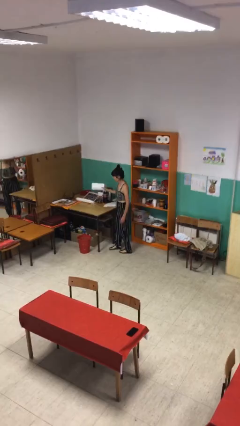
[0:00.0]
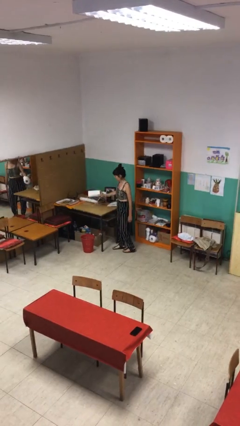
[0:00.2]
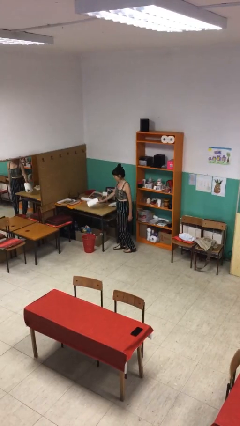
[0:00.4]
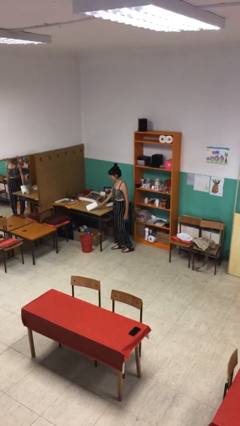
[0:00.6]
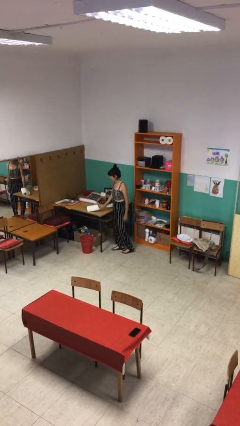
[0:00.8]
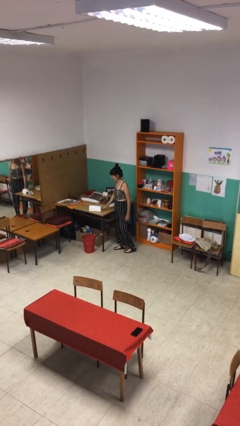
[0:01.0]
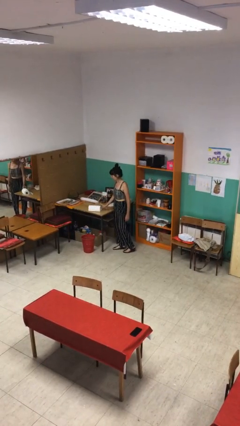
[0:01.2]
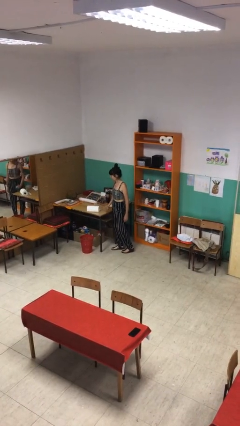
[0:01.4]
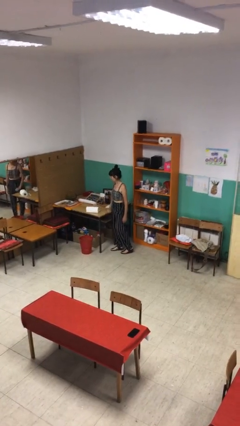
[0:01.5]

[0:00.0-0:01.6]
person puts down object on table

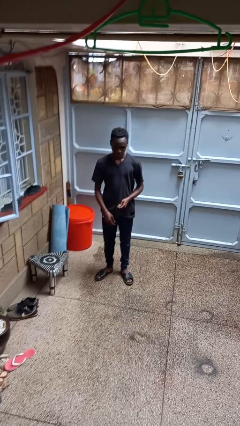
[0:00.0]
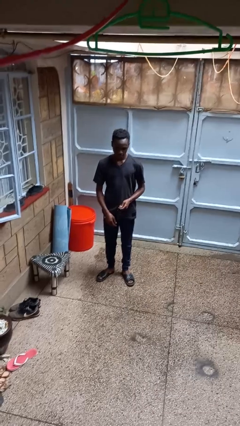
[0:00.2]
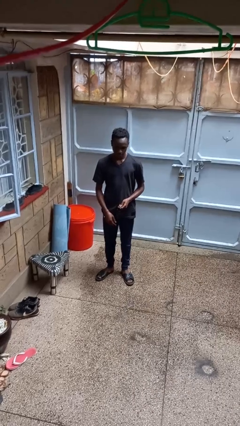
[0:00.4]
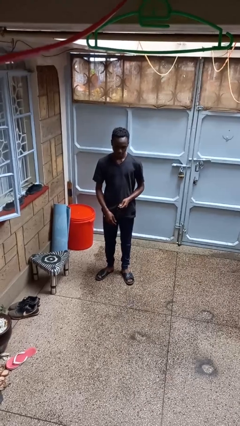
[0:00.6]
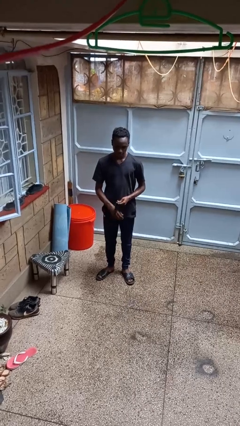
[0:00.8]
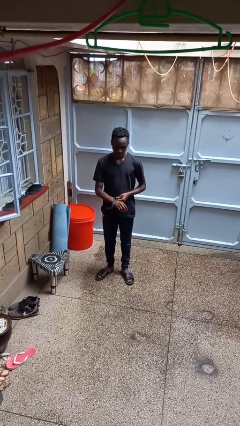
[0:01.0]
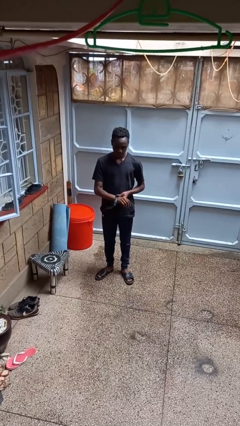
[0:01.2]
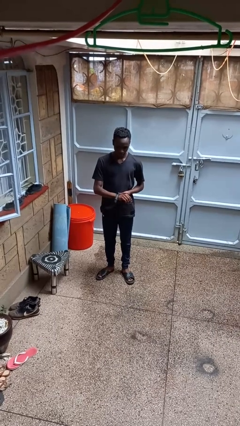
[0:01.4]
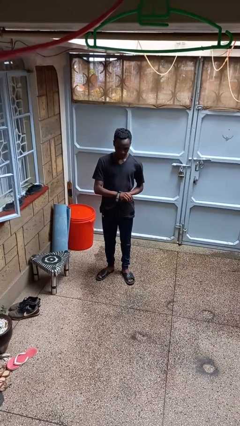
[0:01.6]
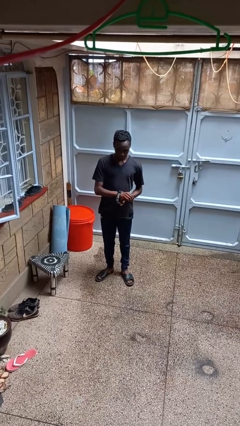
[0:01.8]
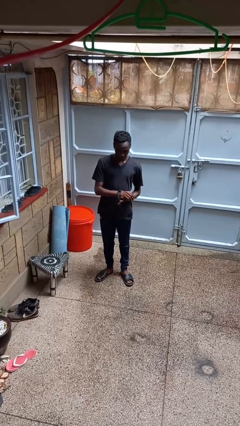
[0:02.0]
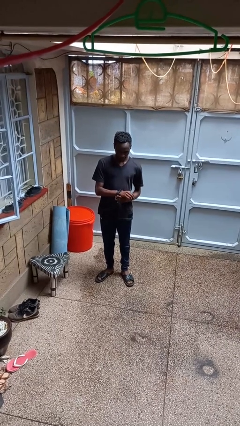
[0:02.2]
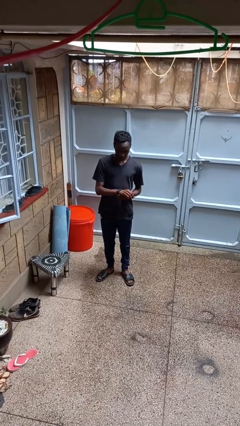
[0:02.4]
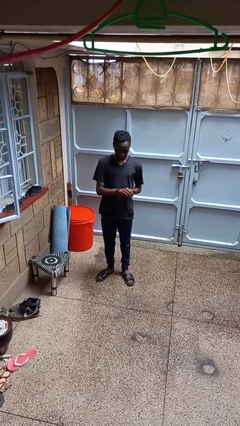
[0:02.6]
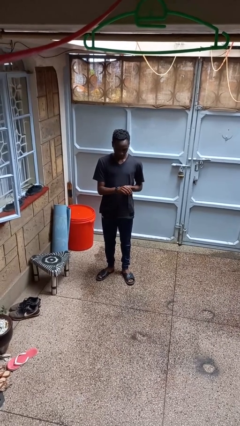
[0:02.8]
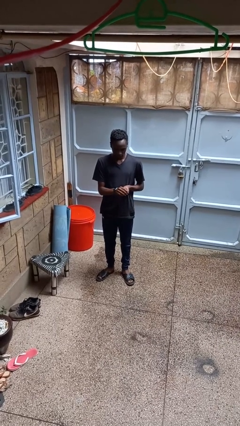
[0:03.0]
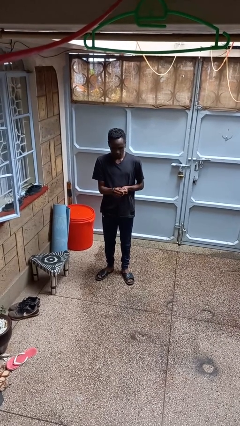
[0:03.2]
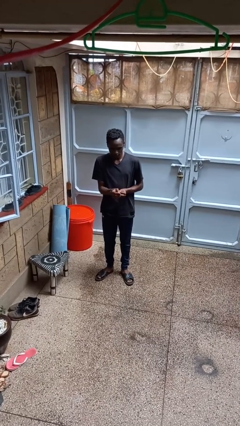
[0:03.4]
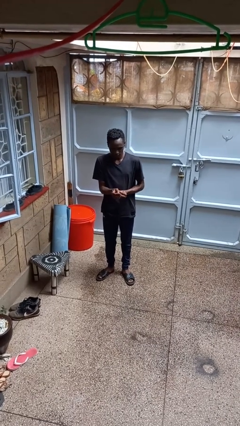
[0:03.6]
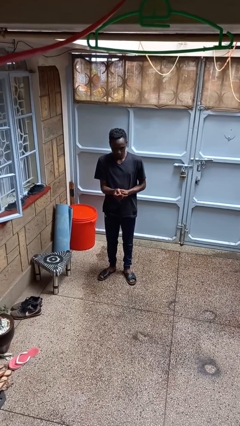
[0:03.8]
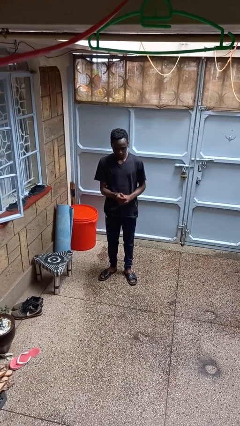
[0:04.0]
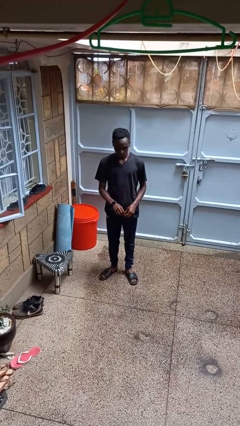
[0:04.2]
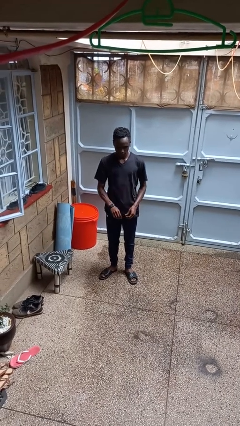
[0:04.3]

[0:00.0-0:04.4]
person puts on wristwatch

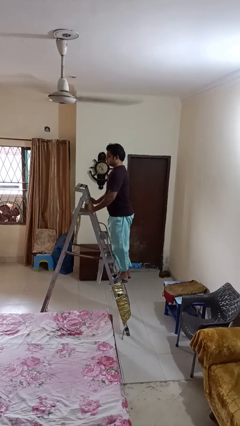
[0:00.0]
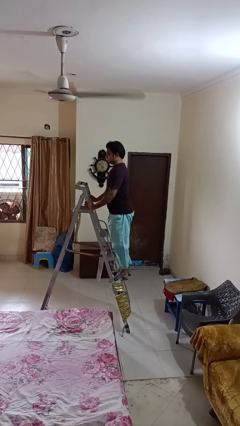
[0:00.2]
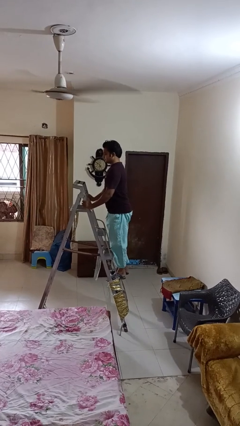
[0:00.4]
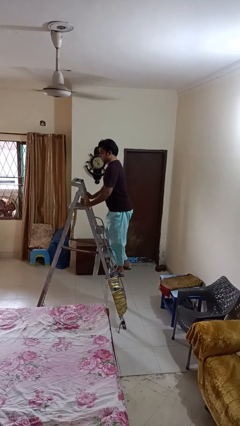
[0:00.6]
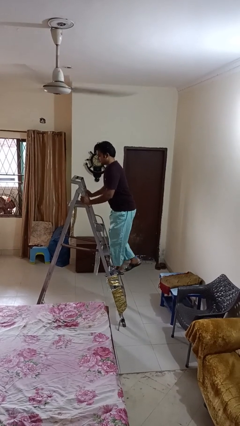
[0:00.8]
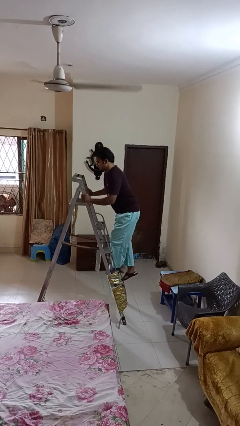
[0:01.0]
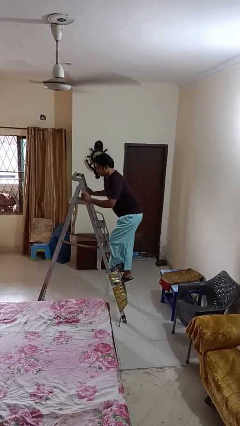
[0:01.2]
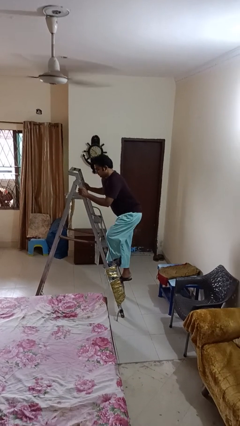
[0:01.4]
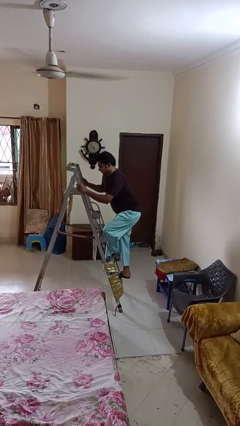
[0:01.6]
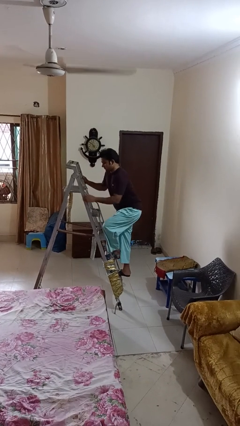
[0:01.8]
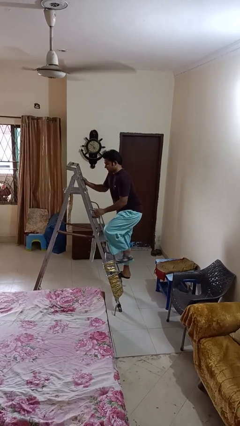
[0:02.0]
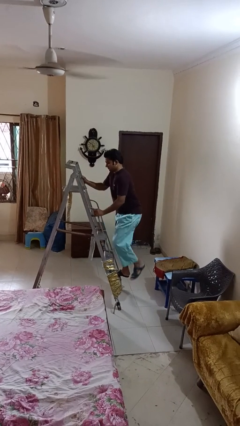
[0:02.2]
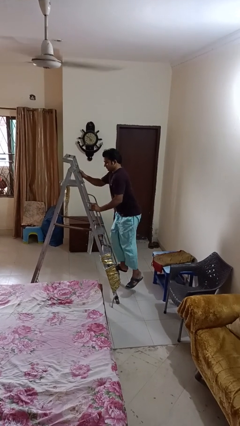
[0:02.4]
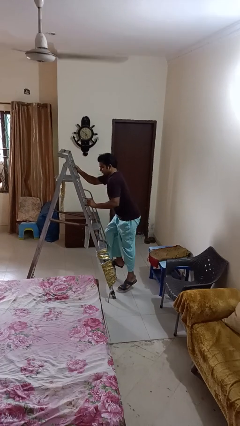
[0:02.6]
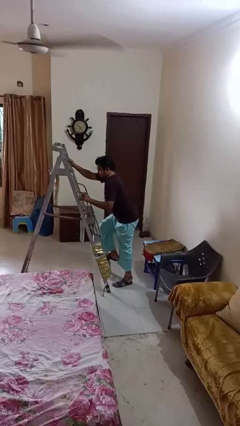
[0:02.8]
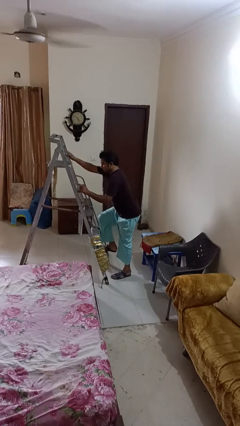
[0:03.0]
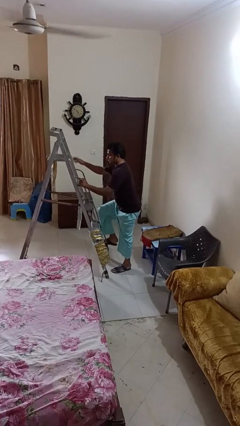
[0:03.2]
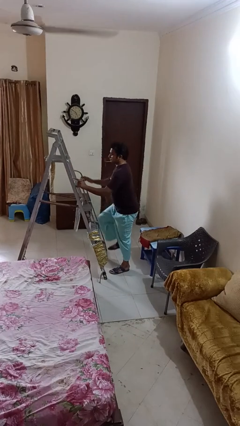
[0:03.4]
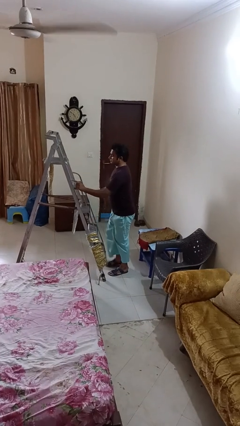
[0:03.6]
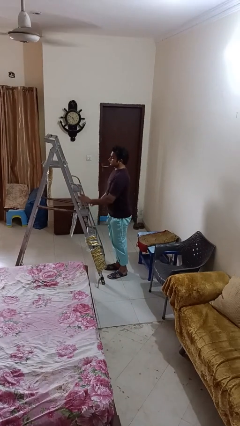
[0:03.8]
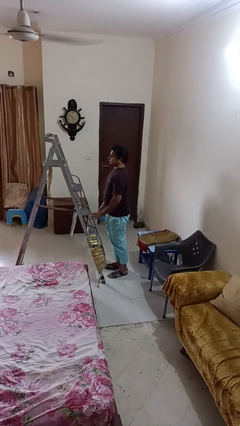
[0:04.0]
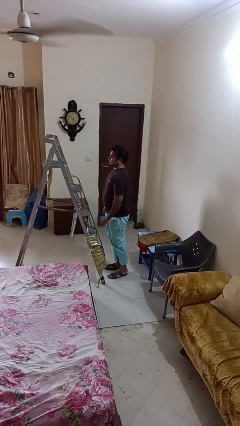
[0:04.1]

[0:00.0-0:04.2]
person climbs down ladder

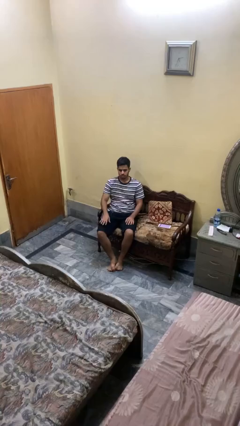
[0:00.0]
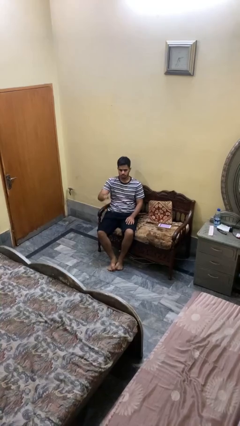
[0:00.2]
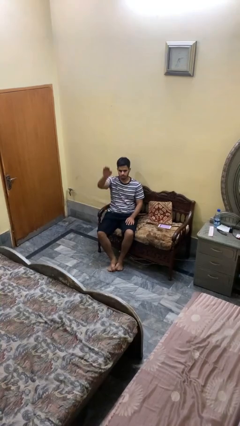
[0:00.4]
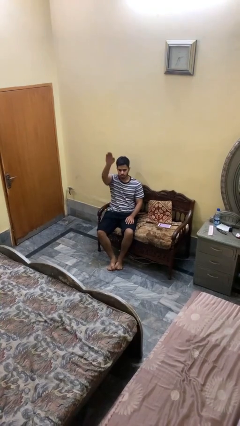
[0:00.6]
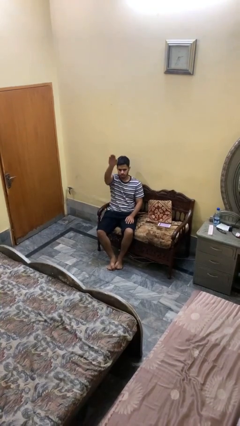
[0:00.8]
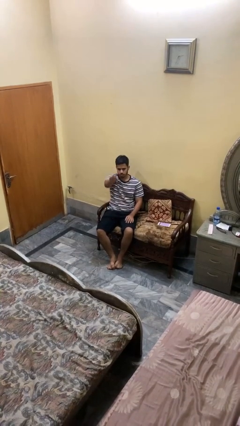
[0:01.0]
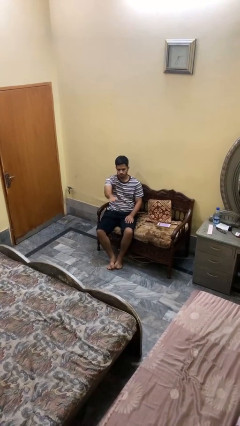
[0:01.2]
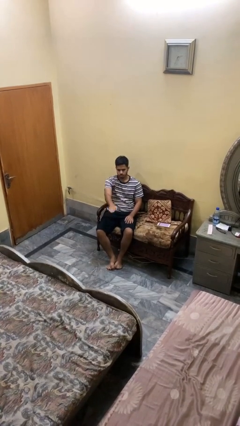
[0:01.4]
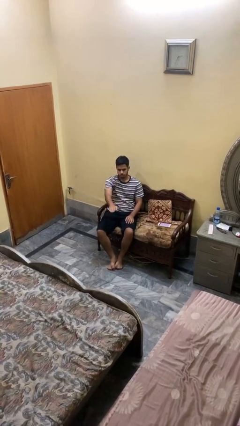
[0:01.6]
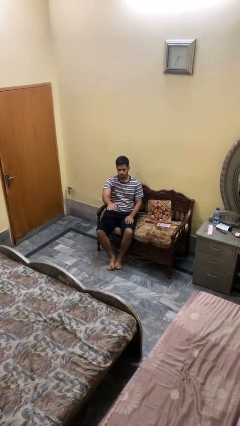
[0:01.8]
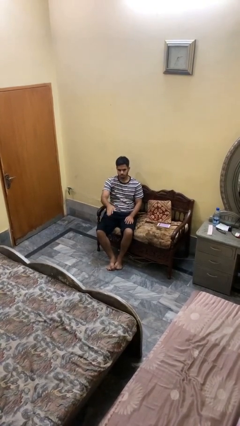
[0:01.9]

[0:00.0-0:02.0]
person gestures swipe down

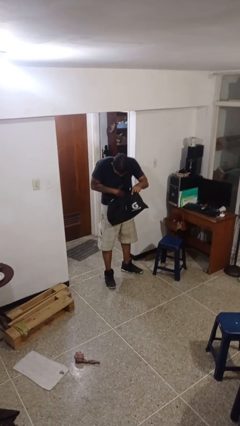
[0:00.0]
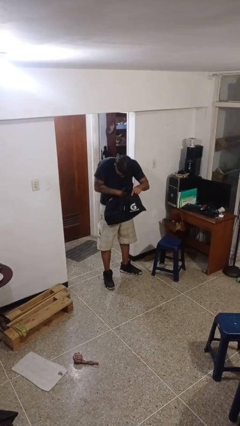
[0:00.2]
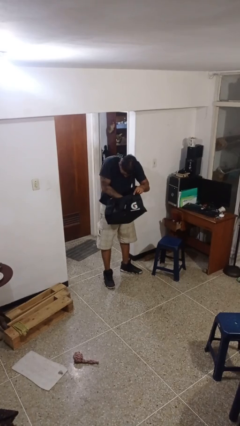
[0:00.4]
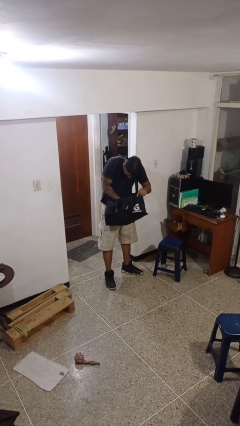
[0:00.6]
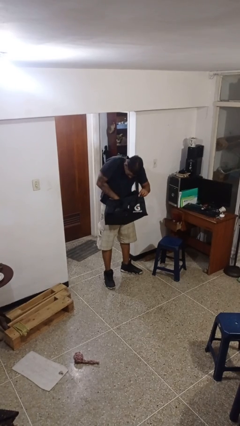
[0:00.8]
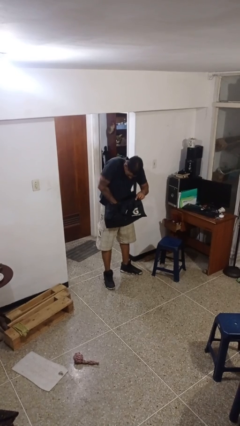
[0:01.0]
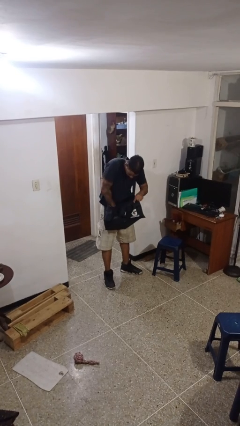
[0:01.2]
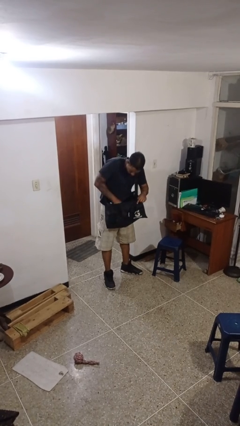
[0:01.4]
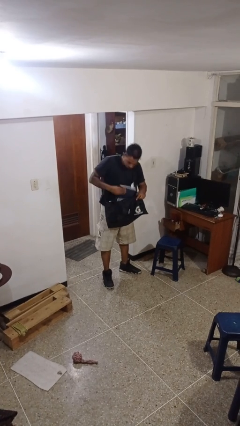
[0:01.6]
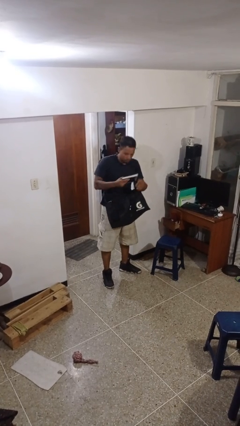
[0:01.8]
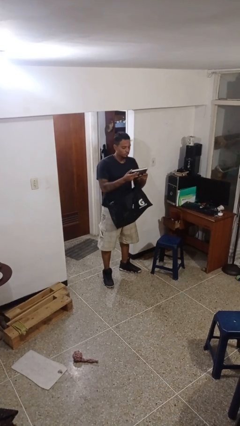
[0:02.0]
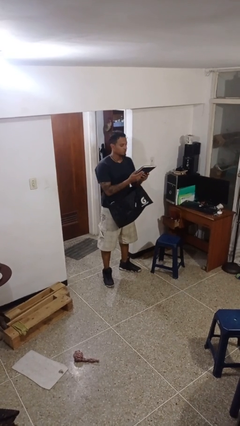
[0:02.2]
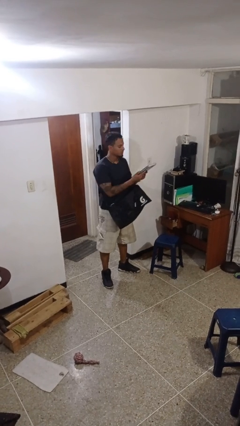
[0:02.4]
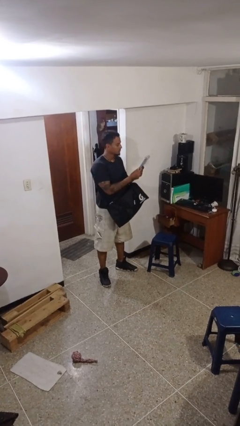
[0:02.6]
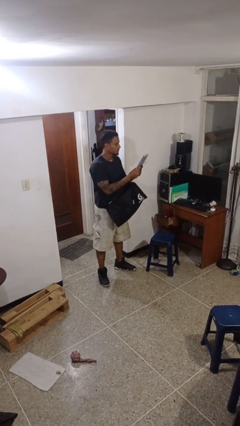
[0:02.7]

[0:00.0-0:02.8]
person takes object from purse

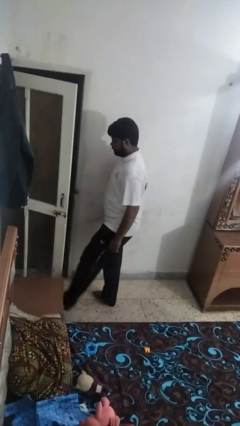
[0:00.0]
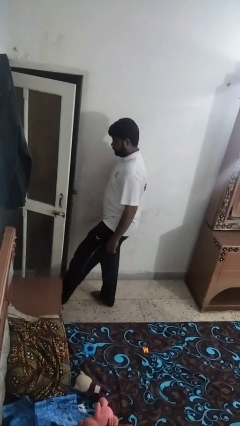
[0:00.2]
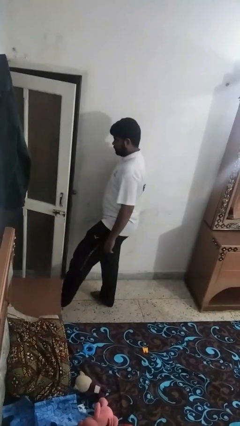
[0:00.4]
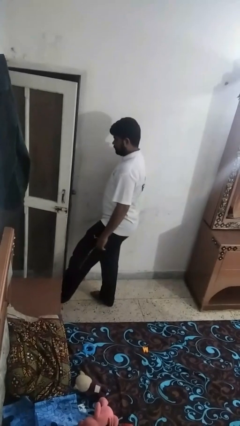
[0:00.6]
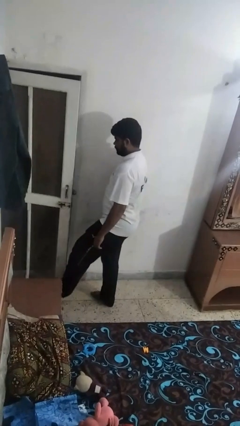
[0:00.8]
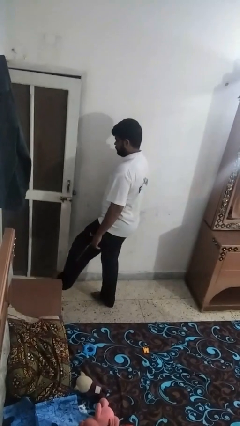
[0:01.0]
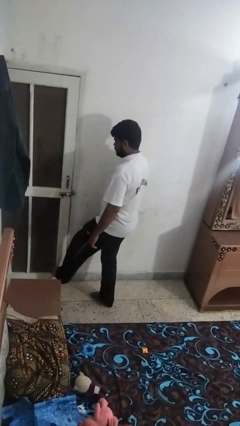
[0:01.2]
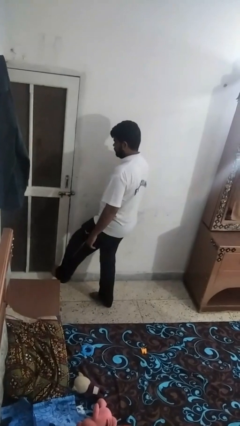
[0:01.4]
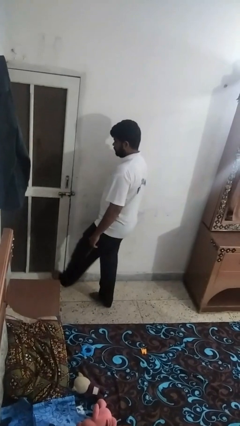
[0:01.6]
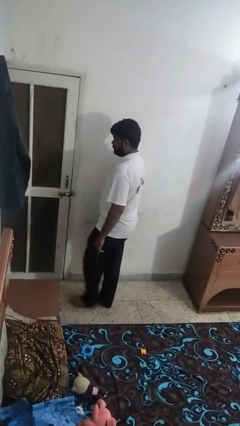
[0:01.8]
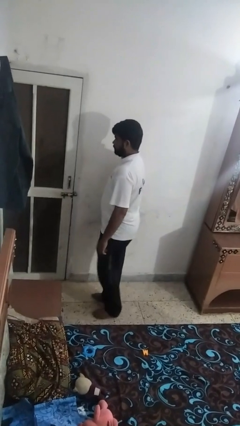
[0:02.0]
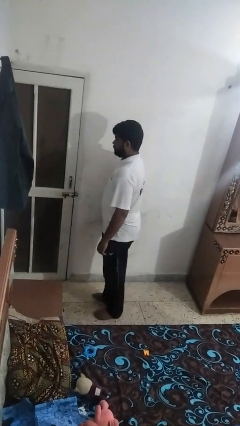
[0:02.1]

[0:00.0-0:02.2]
person closes door with foot

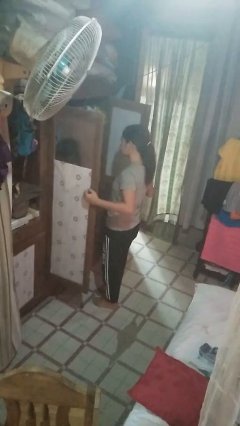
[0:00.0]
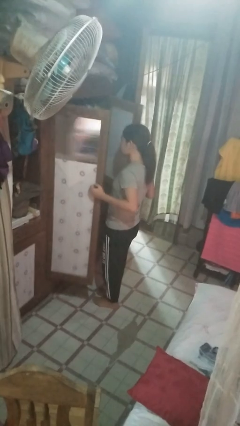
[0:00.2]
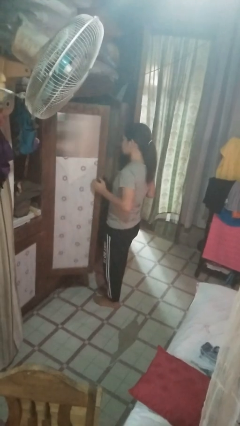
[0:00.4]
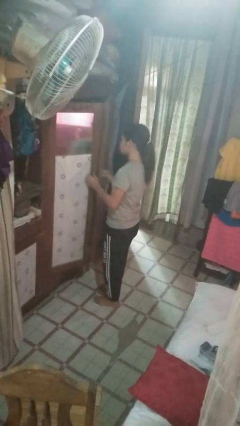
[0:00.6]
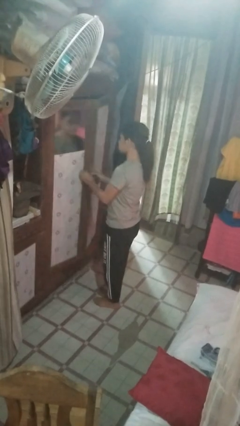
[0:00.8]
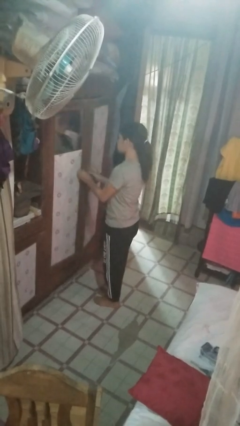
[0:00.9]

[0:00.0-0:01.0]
person closes closet door
